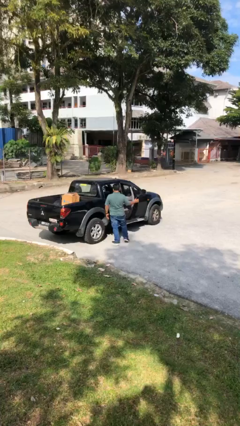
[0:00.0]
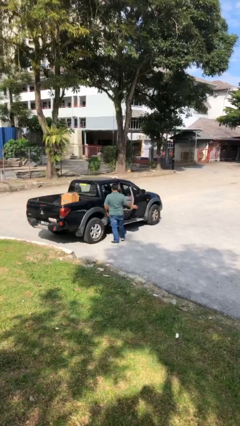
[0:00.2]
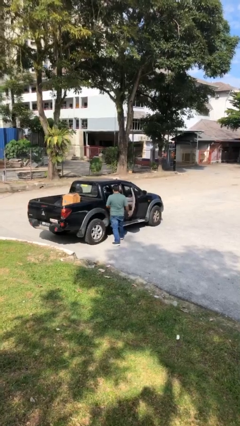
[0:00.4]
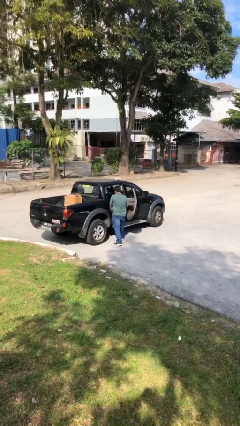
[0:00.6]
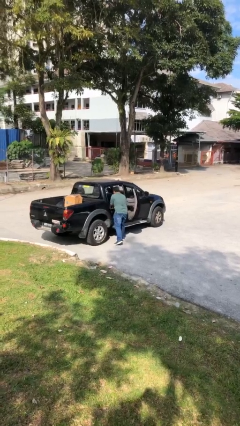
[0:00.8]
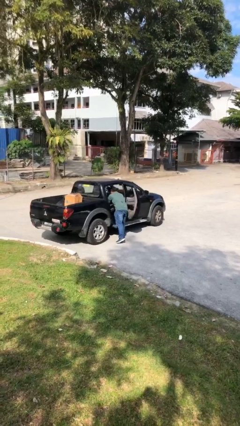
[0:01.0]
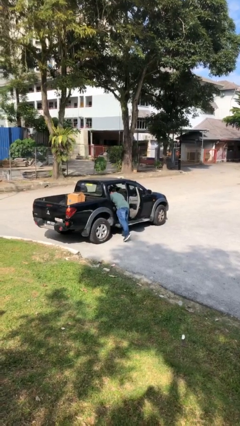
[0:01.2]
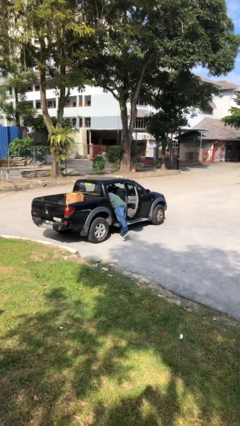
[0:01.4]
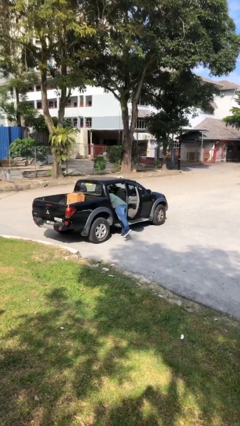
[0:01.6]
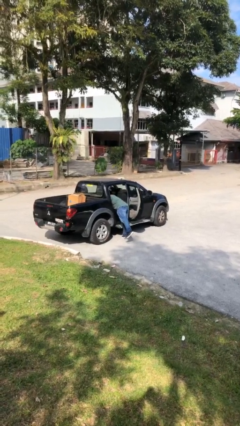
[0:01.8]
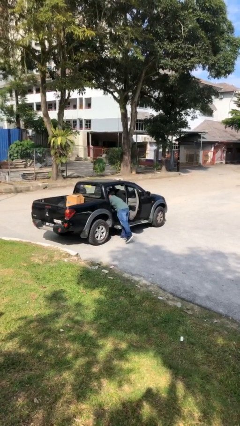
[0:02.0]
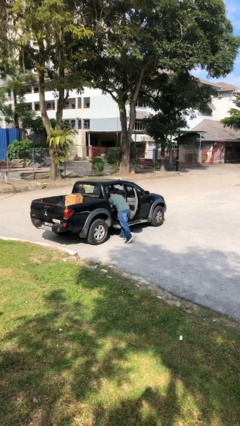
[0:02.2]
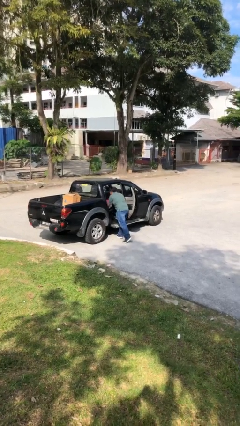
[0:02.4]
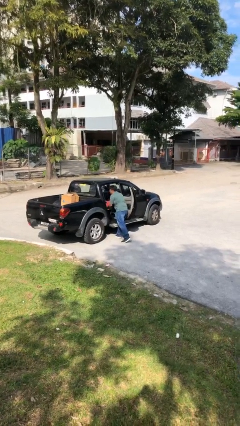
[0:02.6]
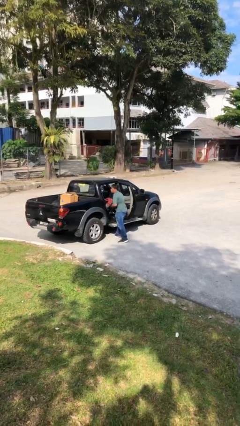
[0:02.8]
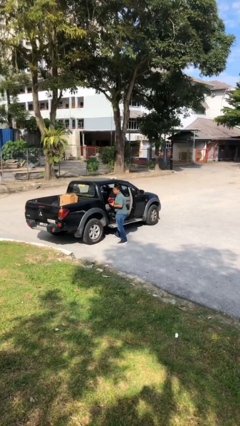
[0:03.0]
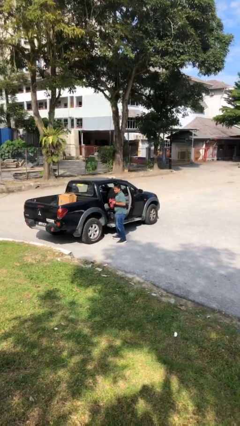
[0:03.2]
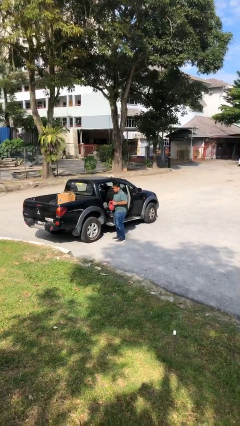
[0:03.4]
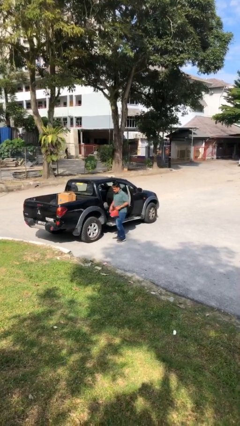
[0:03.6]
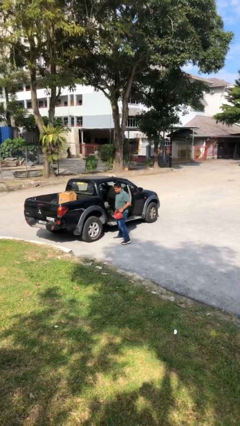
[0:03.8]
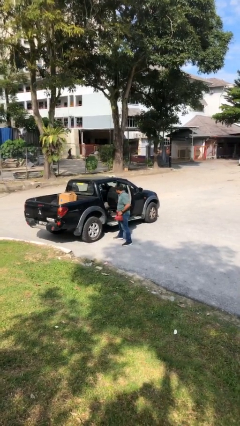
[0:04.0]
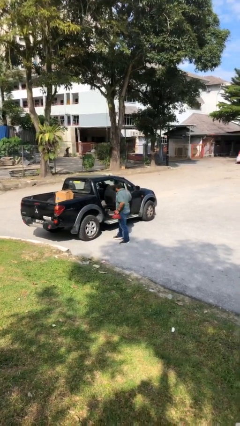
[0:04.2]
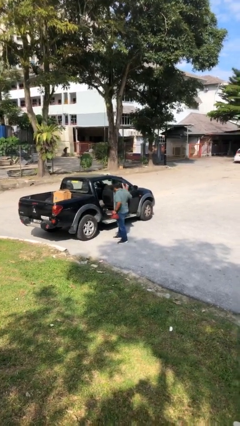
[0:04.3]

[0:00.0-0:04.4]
person unloads car

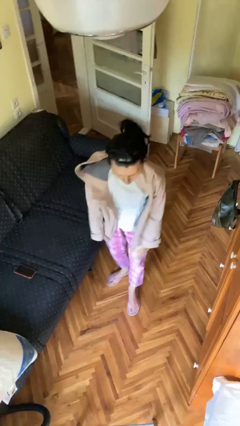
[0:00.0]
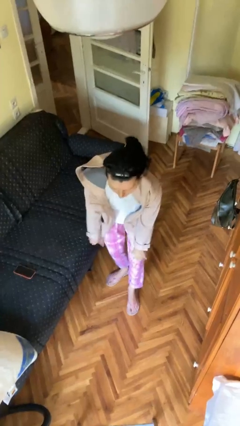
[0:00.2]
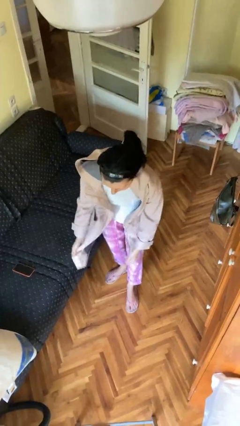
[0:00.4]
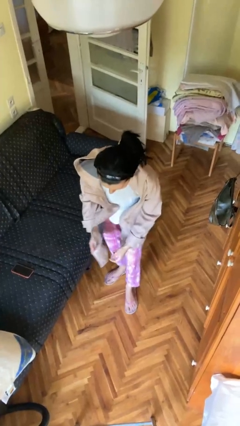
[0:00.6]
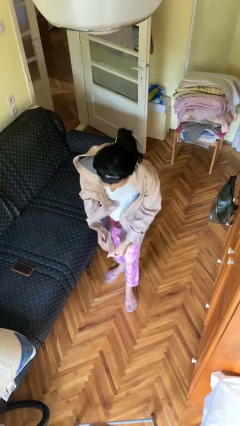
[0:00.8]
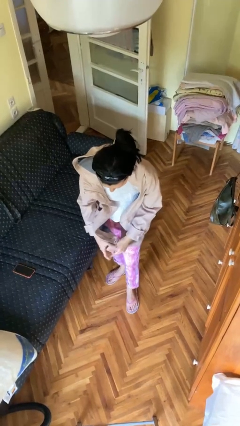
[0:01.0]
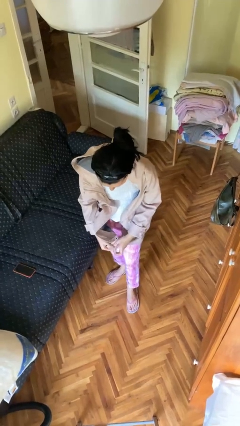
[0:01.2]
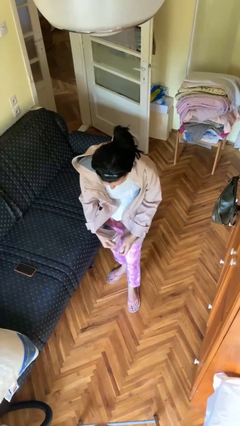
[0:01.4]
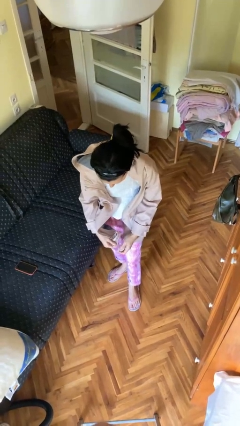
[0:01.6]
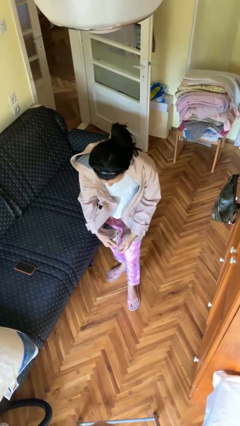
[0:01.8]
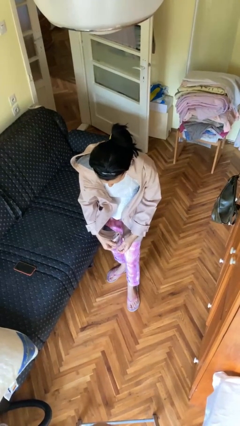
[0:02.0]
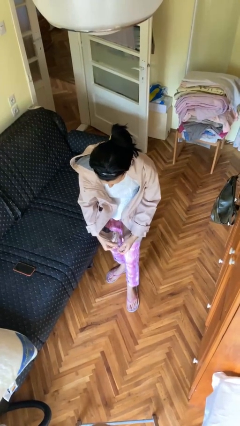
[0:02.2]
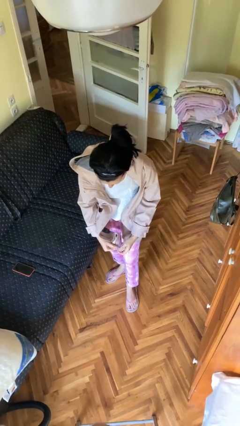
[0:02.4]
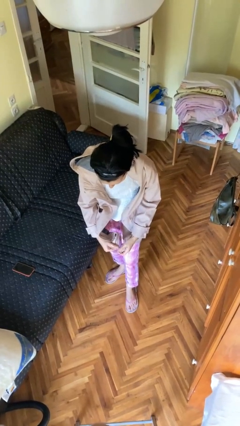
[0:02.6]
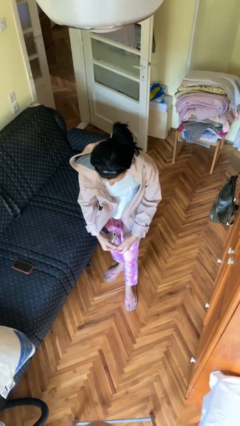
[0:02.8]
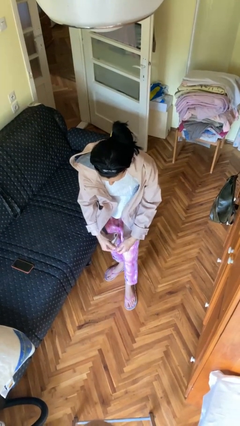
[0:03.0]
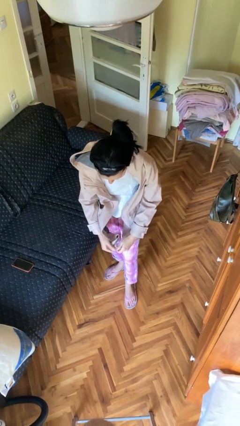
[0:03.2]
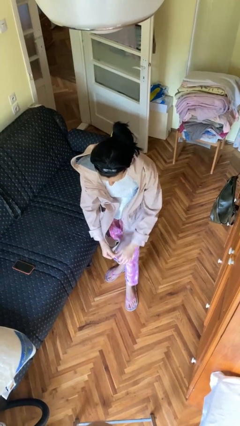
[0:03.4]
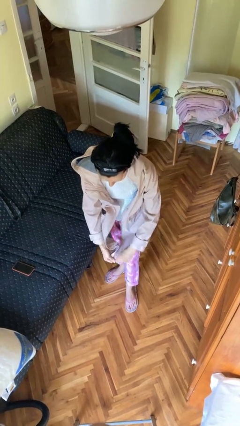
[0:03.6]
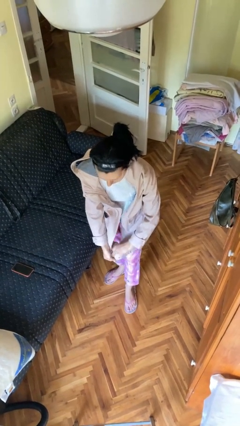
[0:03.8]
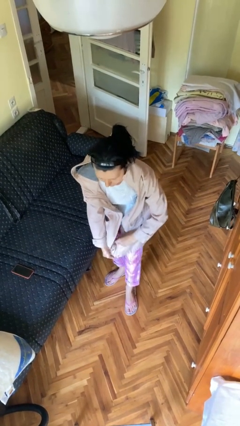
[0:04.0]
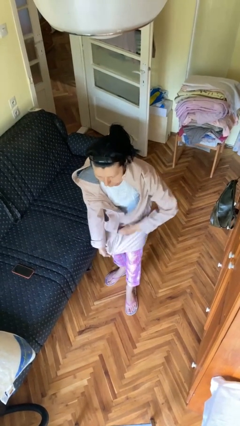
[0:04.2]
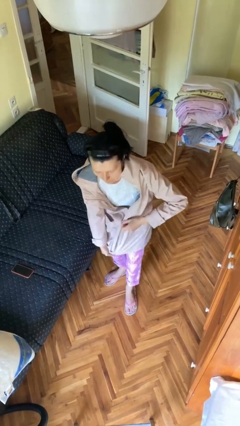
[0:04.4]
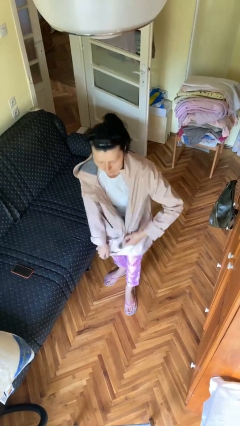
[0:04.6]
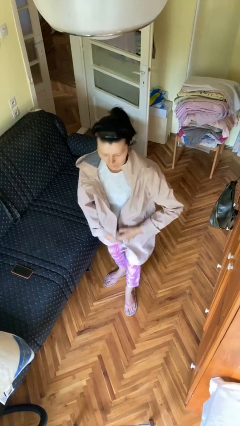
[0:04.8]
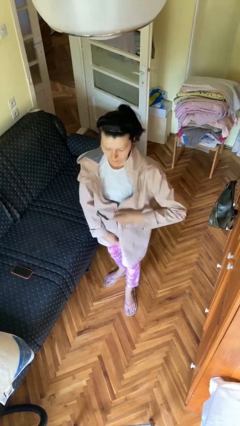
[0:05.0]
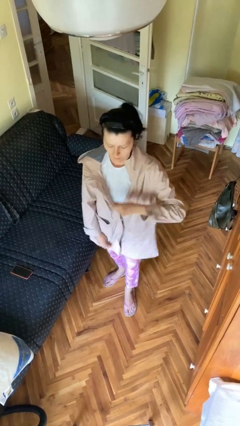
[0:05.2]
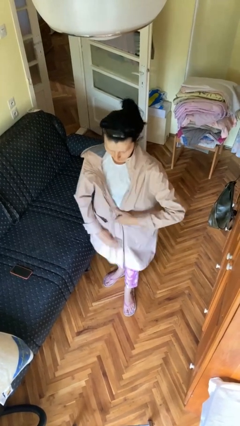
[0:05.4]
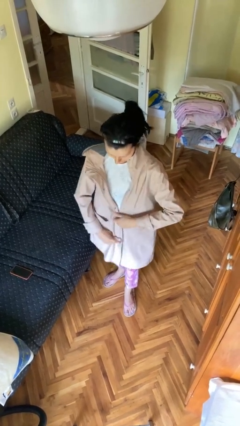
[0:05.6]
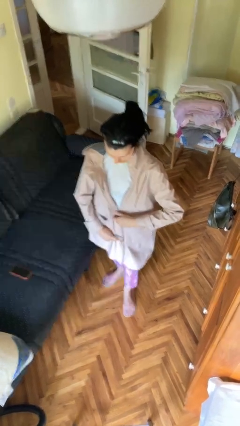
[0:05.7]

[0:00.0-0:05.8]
person zips up jacket

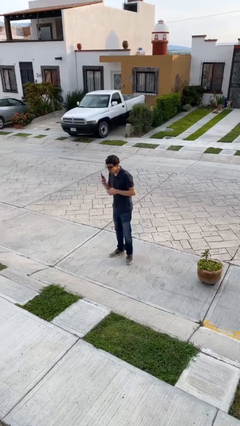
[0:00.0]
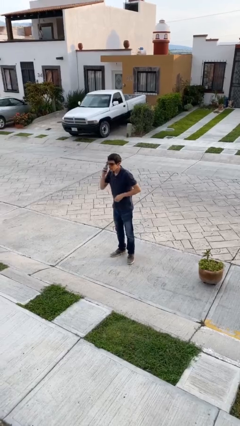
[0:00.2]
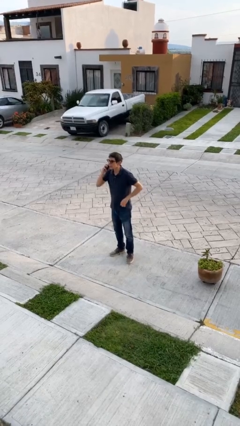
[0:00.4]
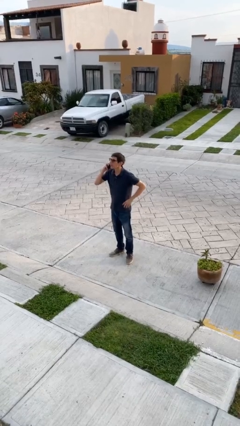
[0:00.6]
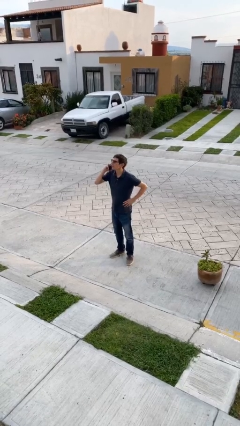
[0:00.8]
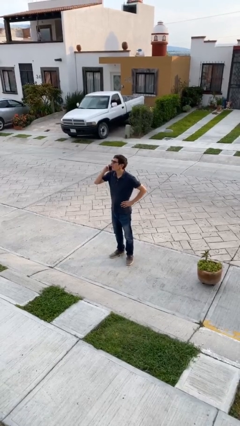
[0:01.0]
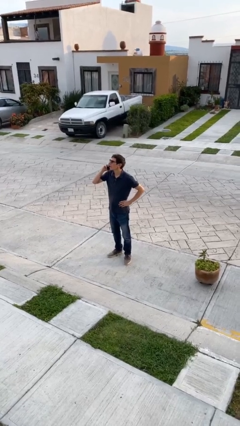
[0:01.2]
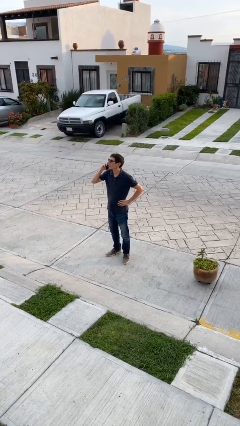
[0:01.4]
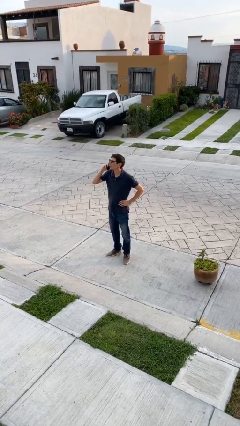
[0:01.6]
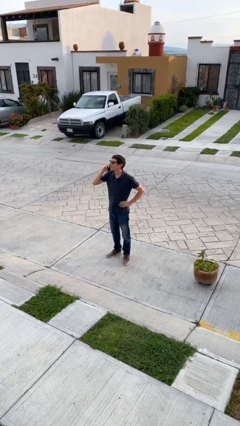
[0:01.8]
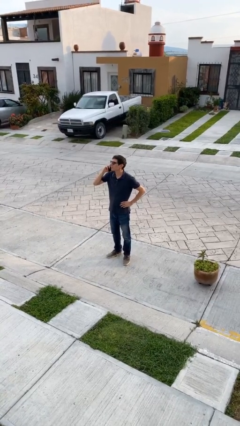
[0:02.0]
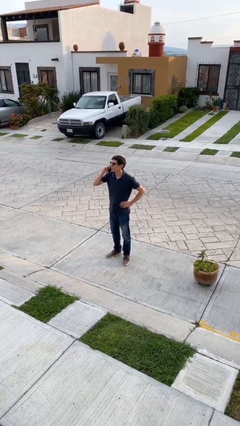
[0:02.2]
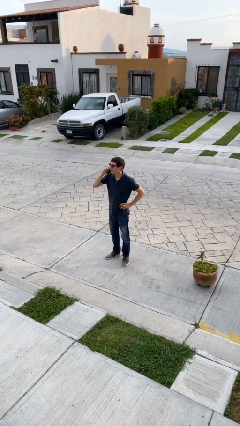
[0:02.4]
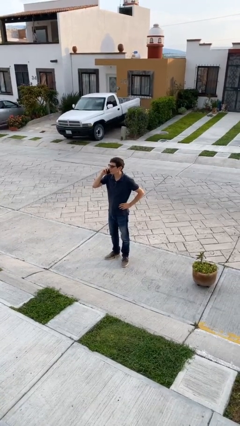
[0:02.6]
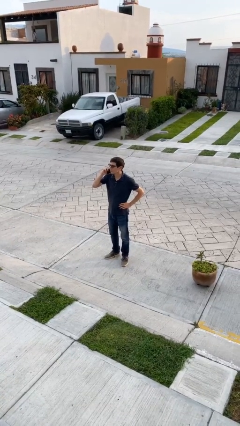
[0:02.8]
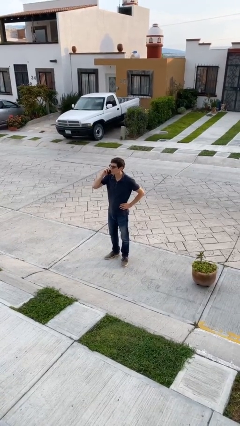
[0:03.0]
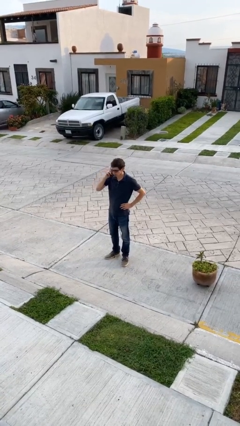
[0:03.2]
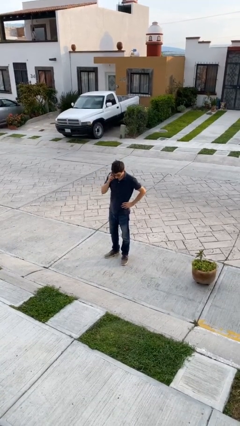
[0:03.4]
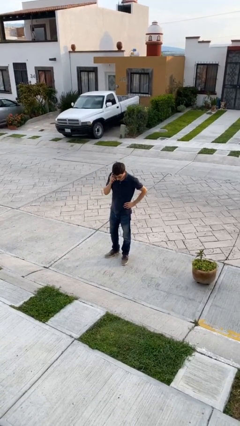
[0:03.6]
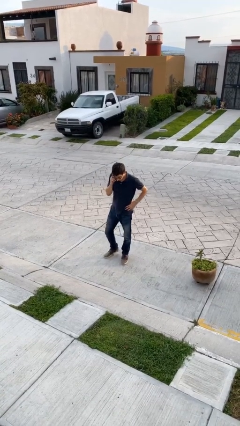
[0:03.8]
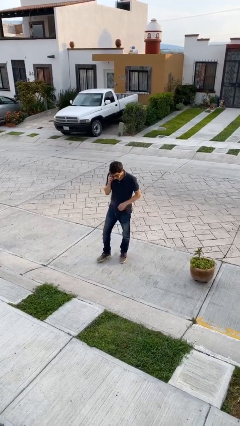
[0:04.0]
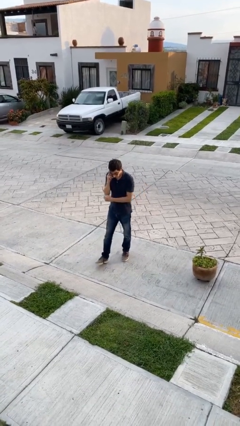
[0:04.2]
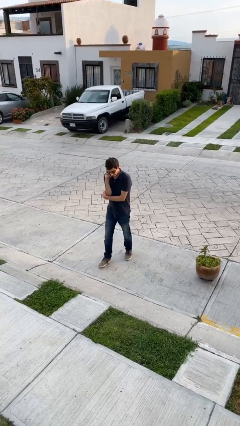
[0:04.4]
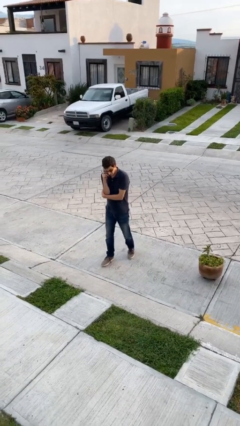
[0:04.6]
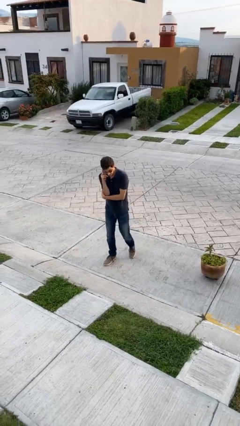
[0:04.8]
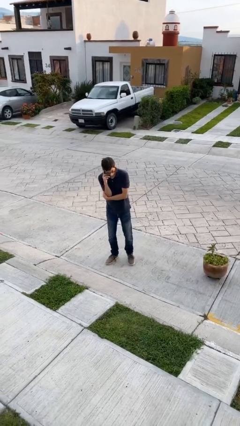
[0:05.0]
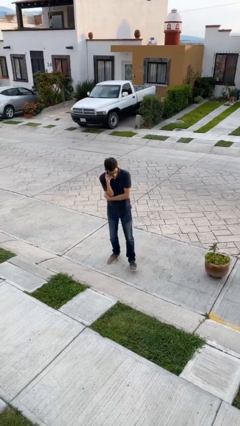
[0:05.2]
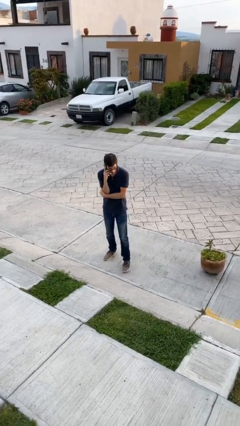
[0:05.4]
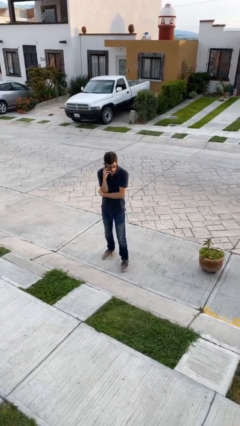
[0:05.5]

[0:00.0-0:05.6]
person talks on phone

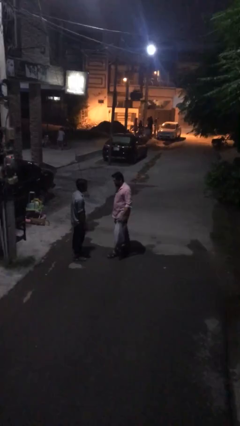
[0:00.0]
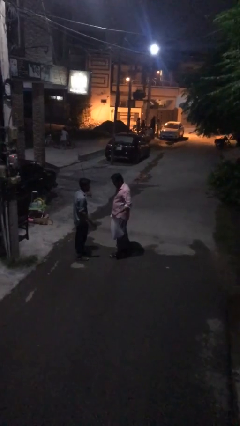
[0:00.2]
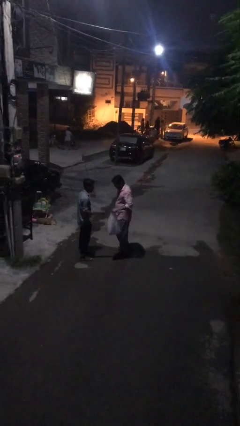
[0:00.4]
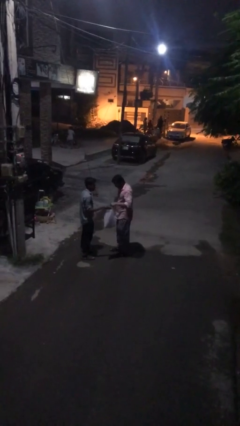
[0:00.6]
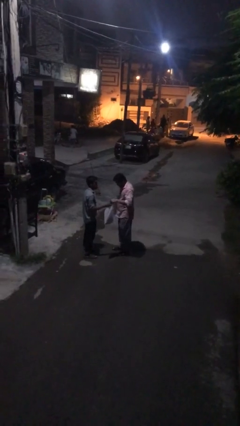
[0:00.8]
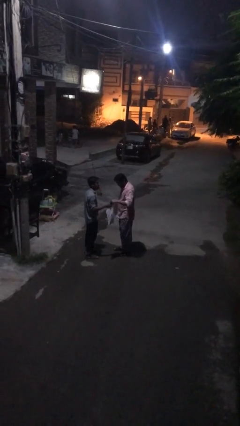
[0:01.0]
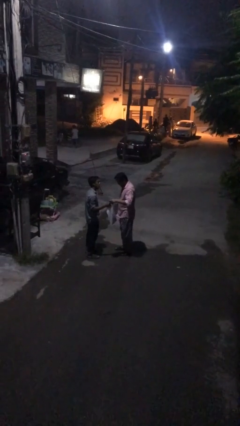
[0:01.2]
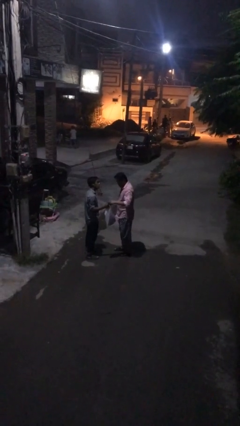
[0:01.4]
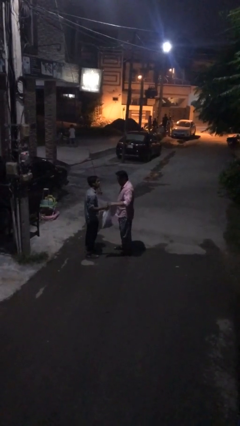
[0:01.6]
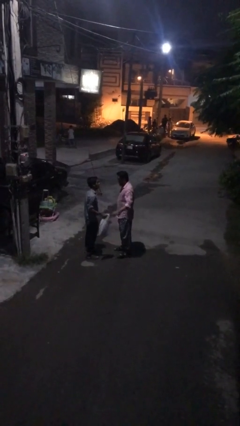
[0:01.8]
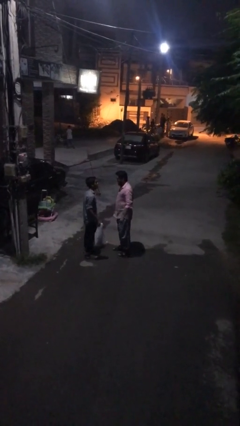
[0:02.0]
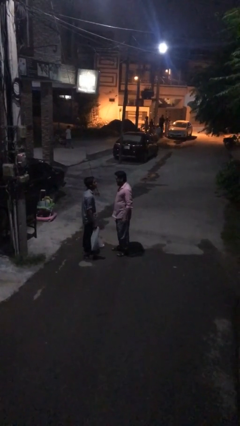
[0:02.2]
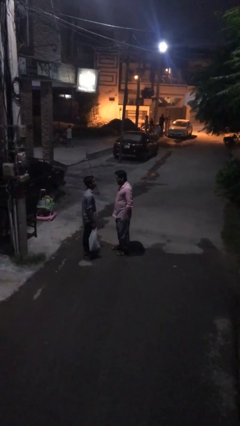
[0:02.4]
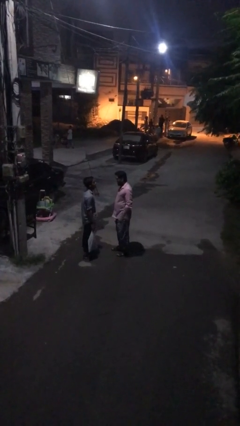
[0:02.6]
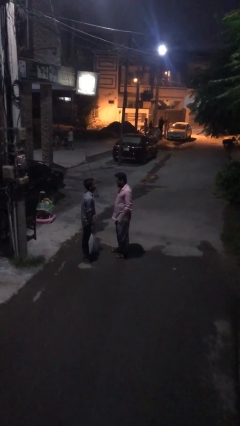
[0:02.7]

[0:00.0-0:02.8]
person transfers object to person
